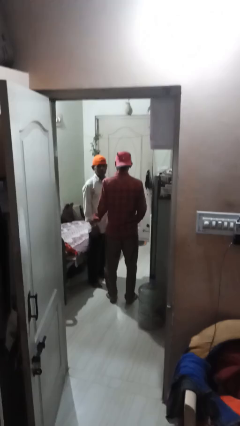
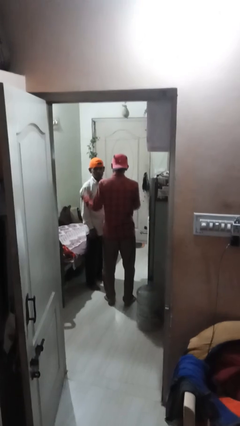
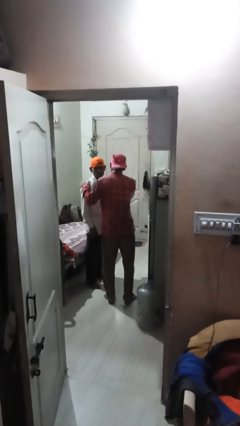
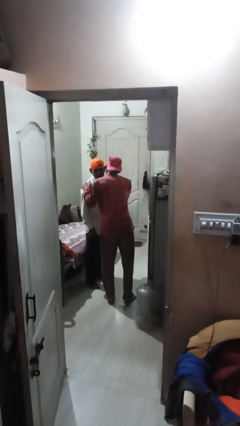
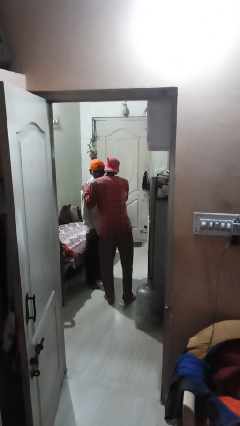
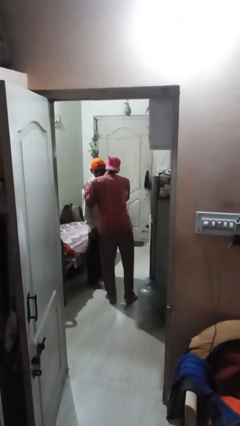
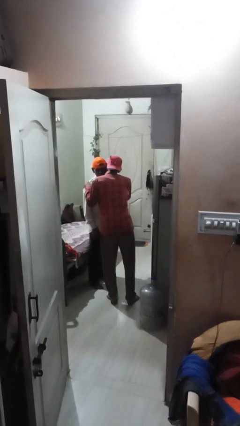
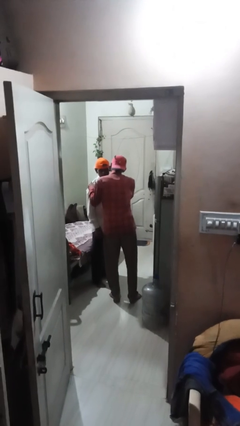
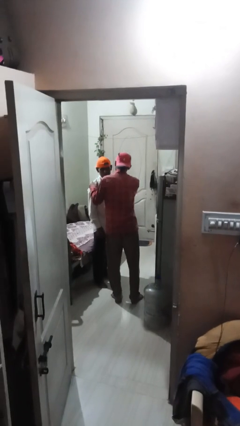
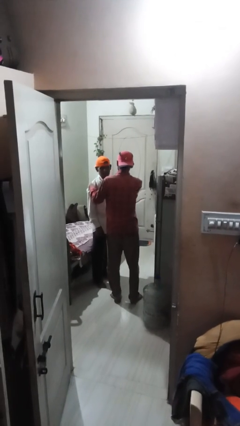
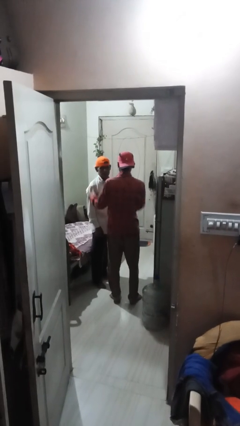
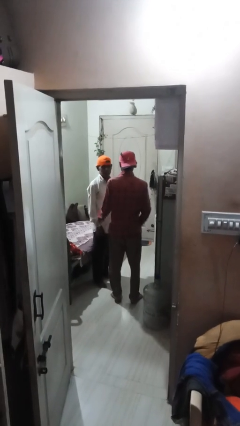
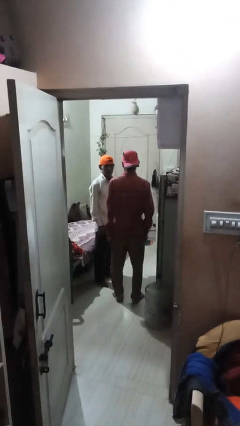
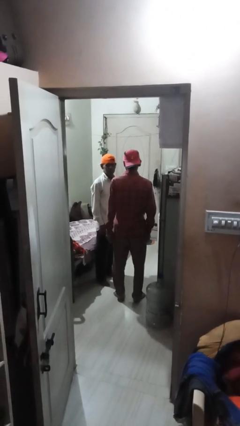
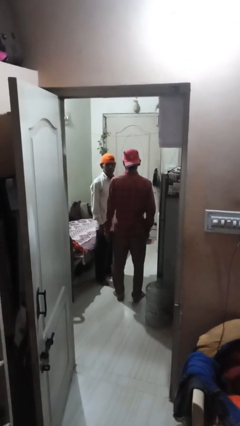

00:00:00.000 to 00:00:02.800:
person kisses cheek of person

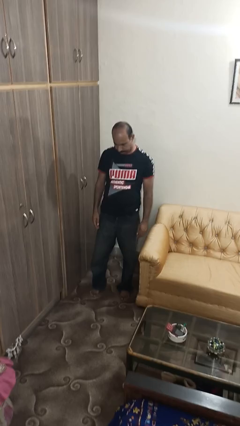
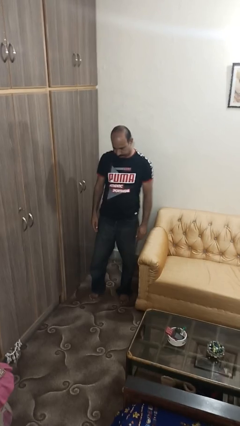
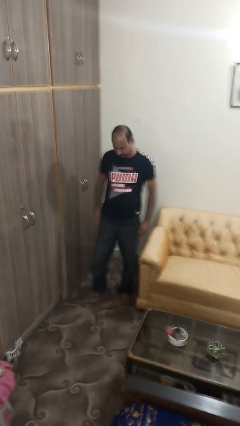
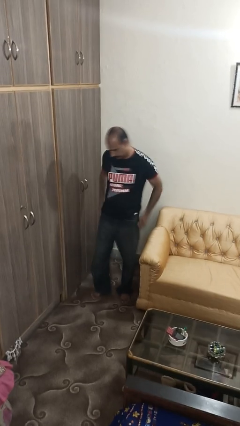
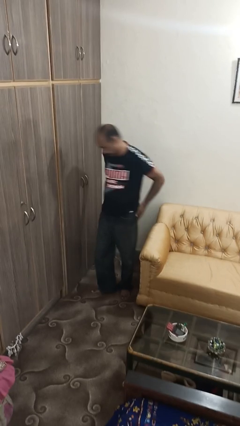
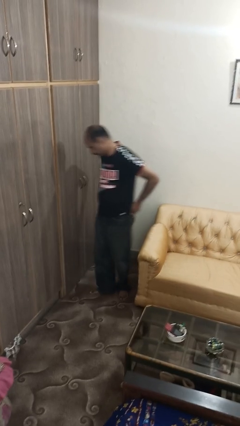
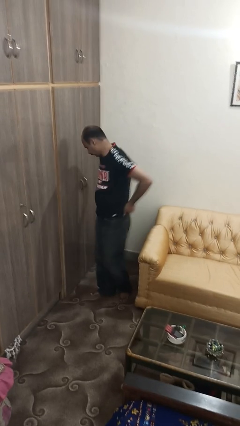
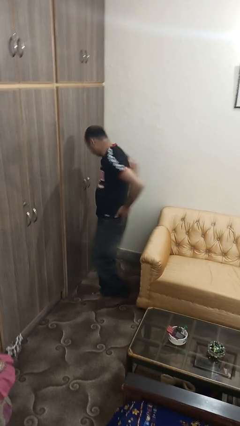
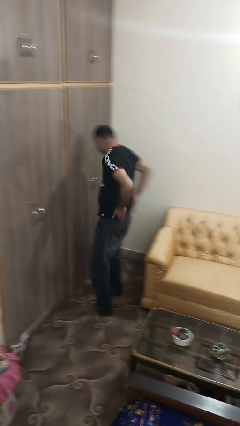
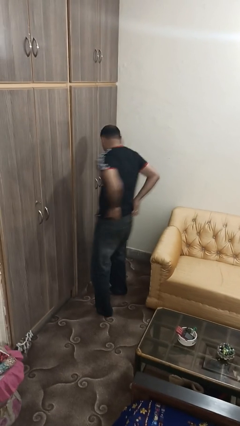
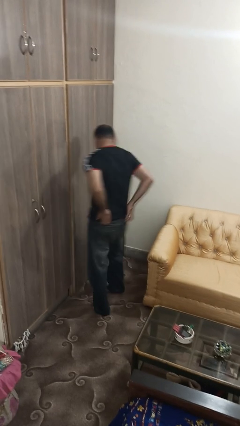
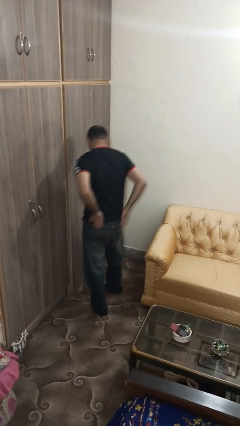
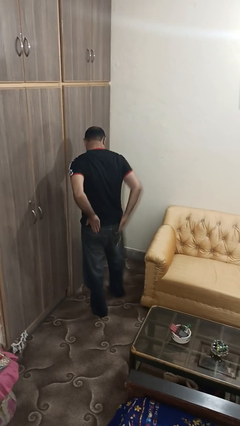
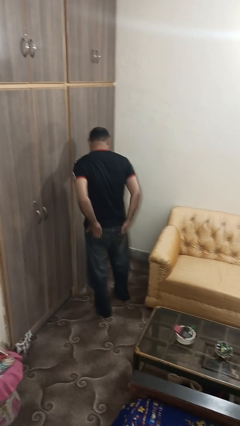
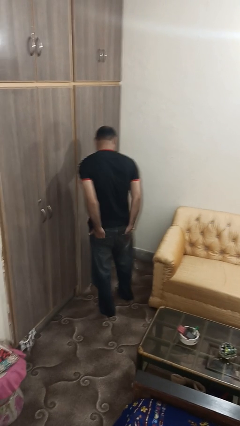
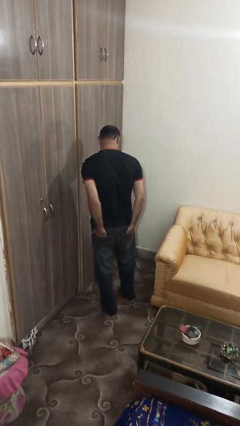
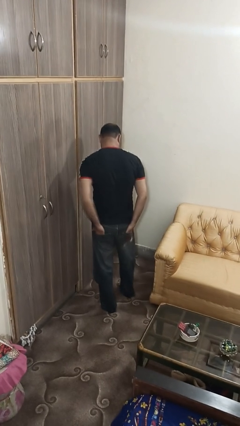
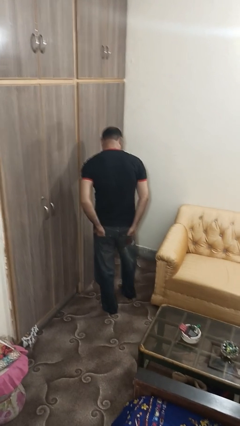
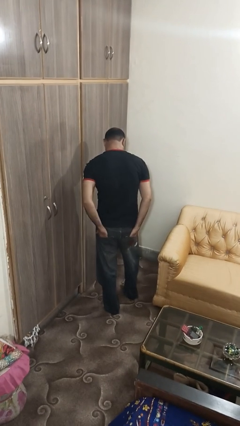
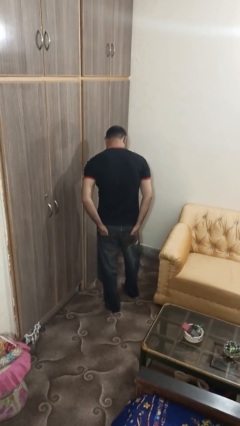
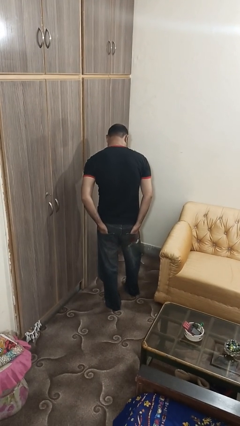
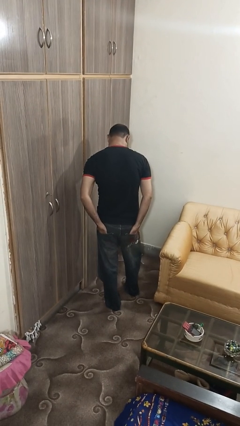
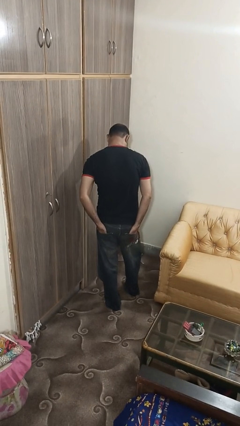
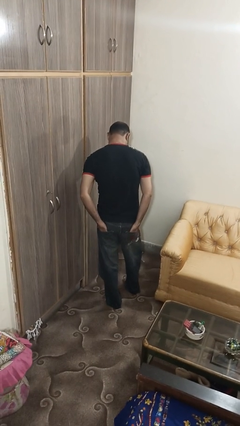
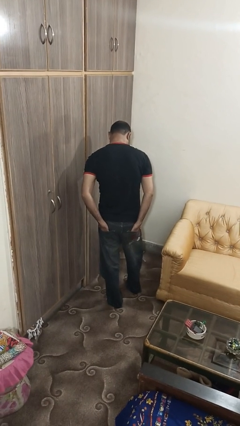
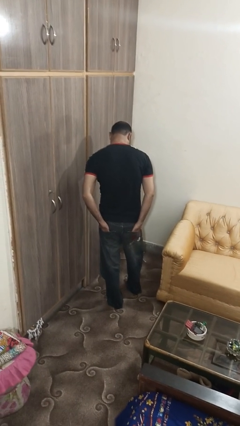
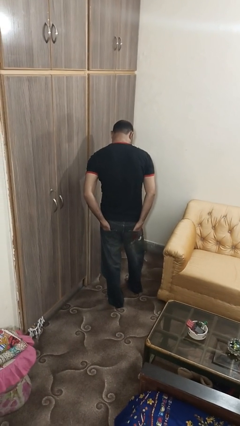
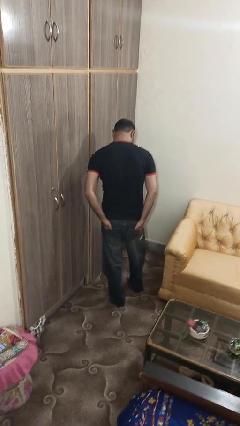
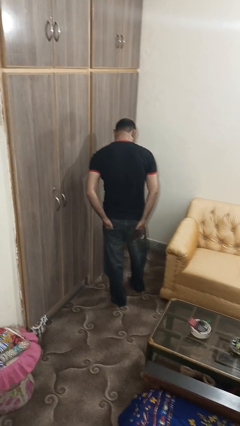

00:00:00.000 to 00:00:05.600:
person puts hands in back pockets

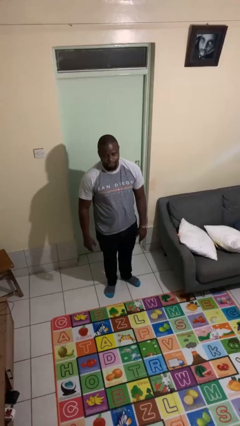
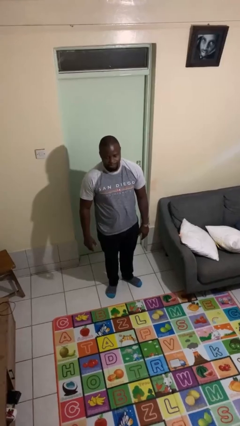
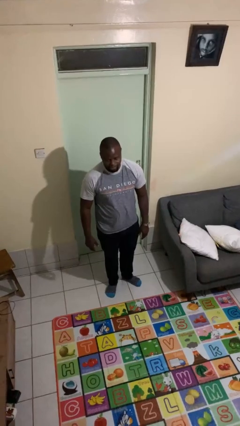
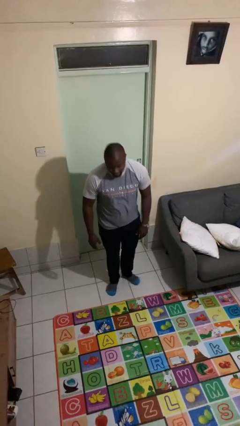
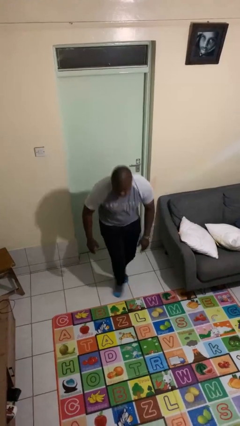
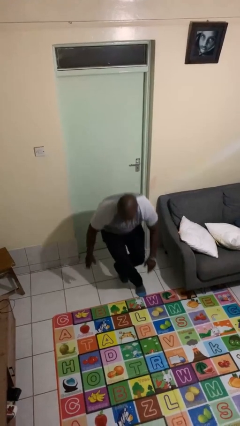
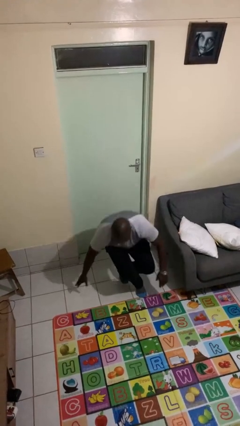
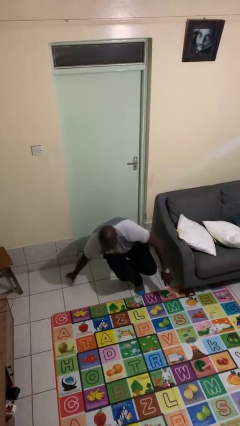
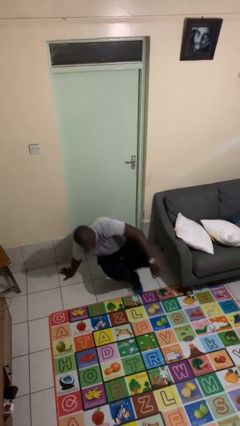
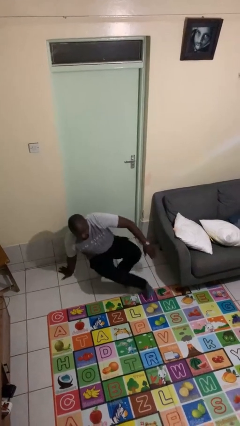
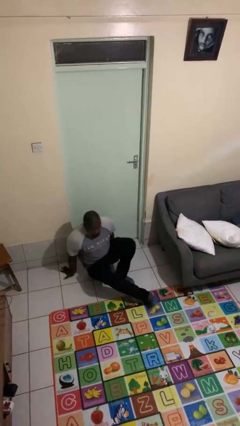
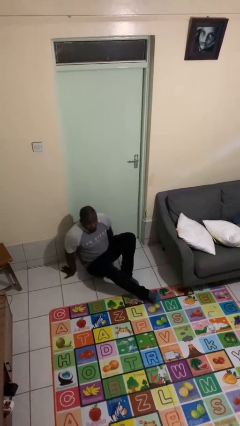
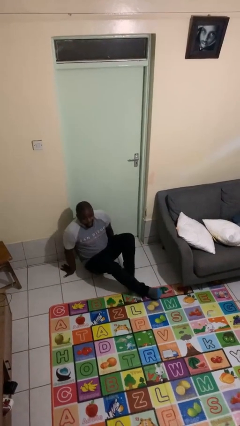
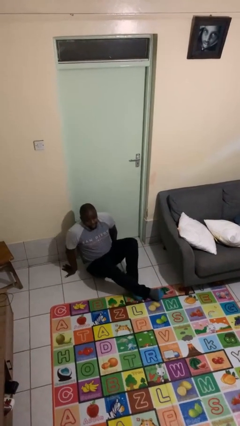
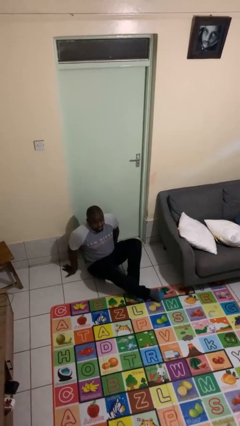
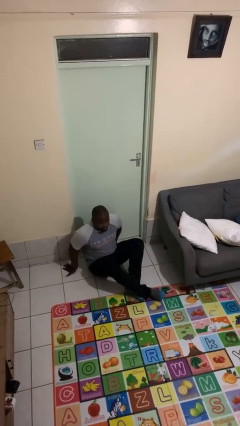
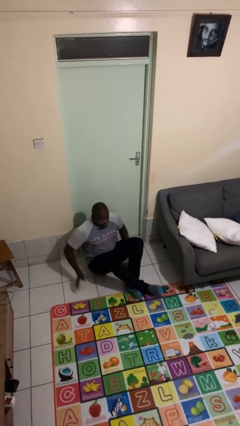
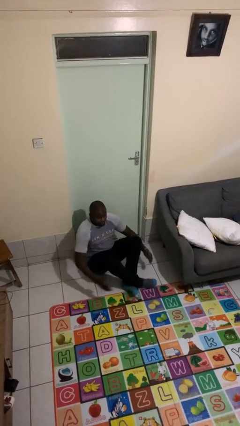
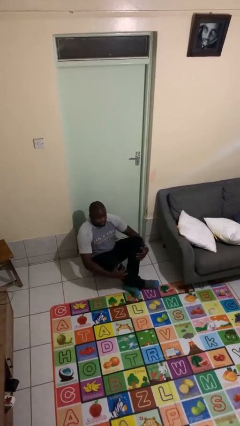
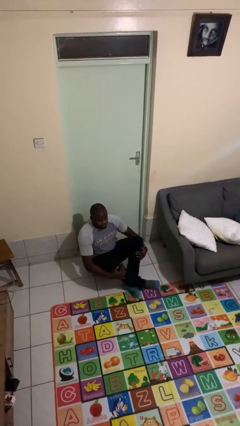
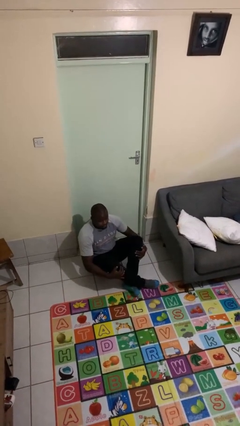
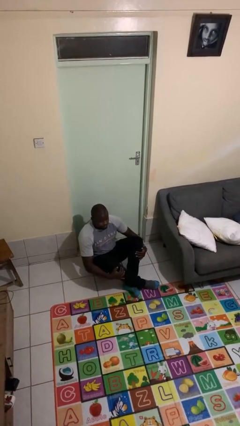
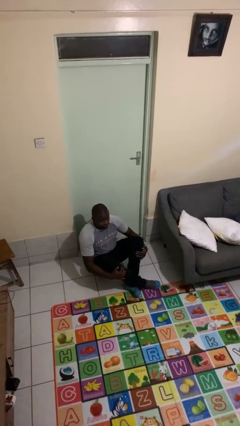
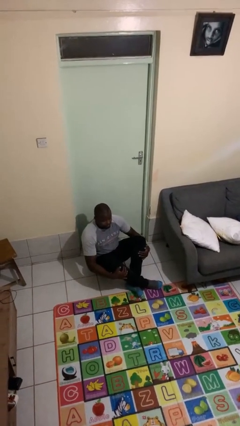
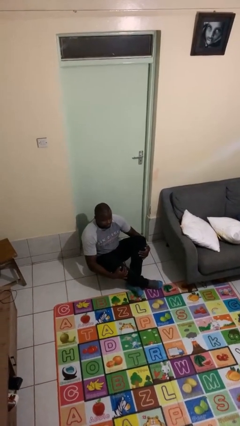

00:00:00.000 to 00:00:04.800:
person sits crisscross

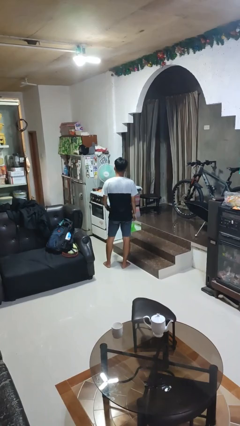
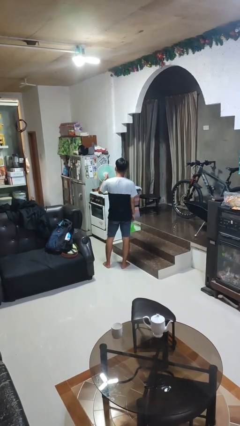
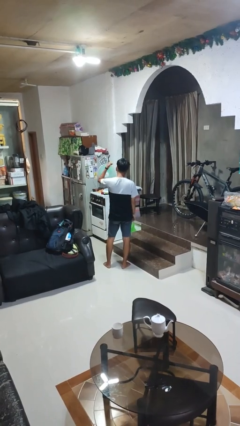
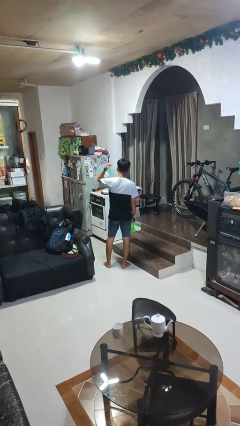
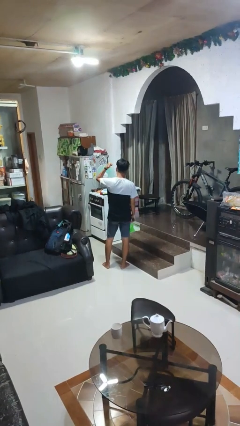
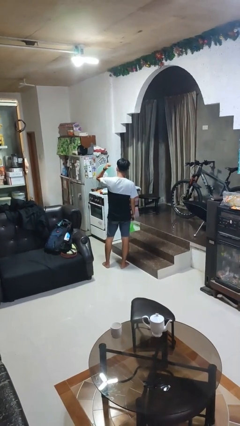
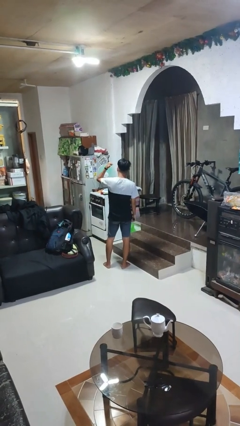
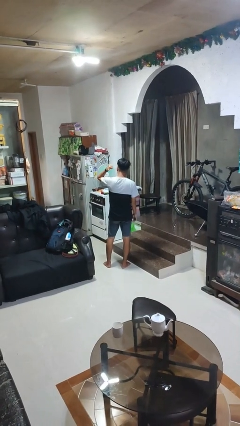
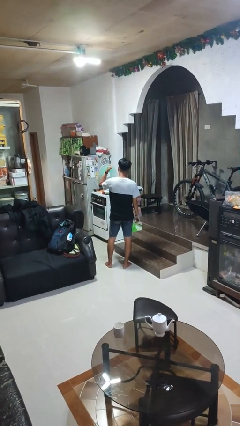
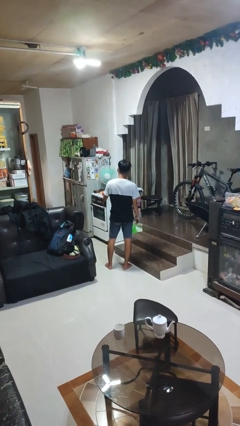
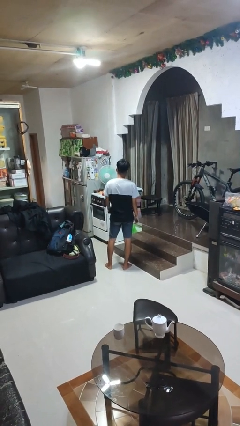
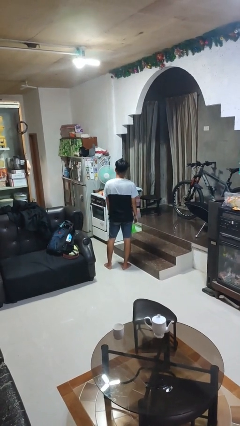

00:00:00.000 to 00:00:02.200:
person gestures behind me

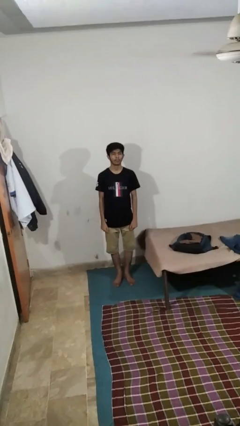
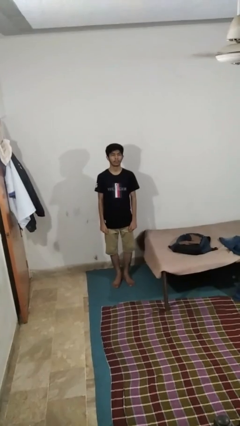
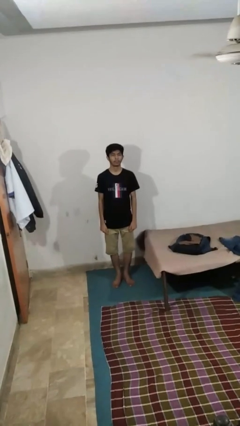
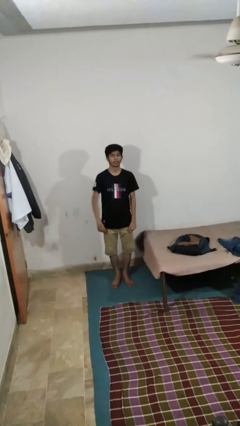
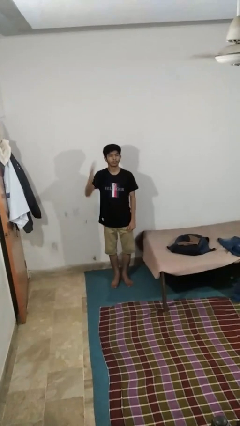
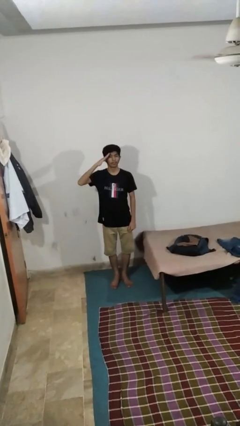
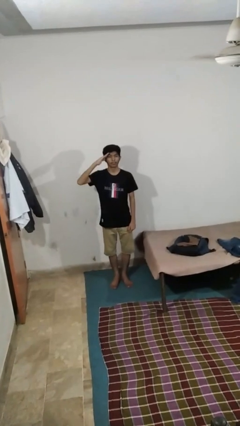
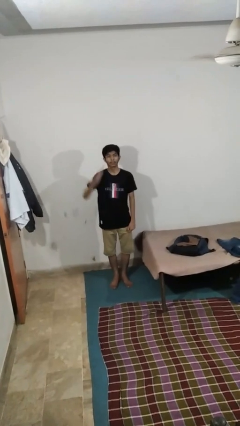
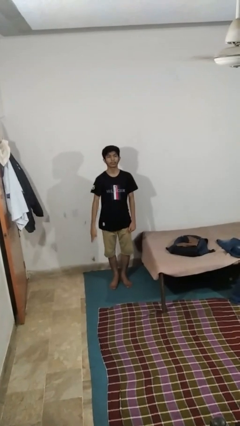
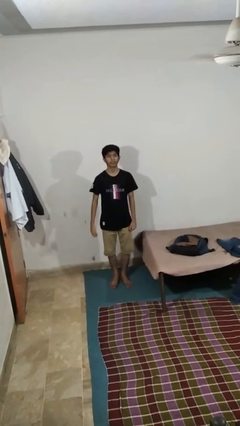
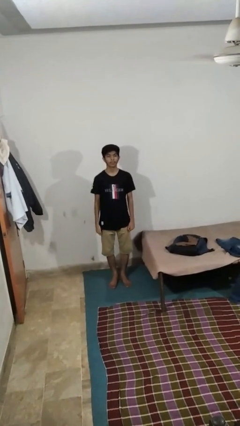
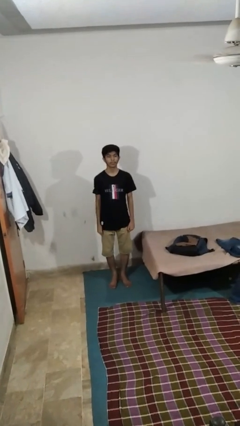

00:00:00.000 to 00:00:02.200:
person salutes
